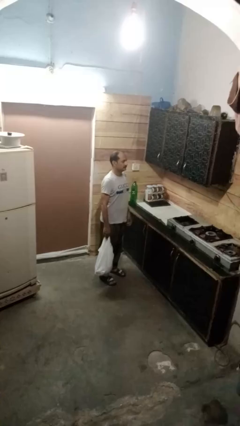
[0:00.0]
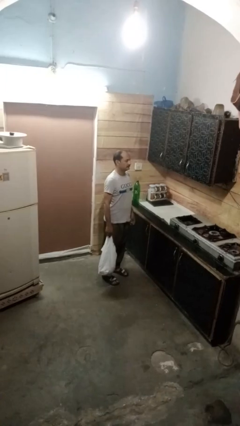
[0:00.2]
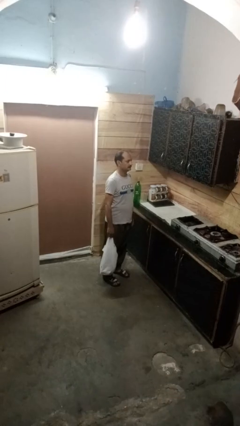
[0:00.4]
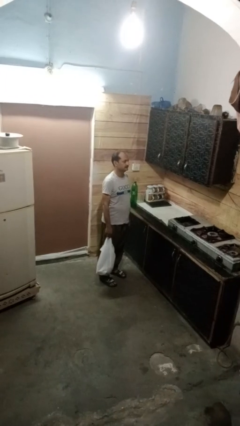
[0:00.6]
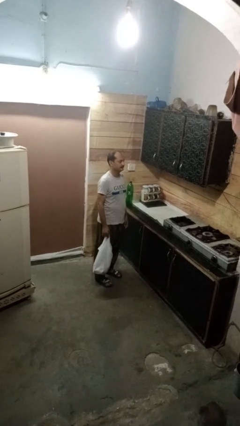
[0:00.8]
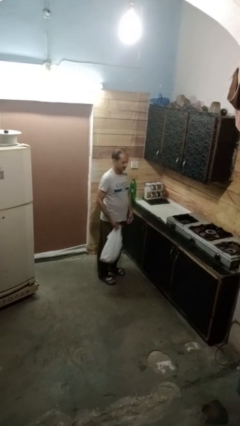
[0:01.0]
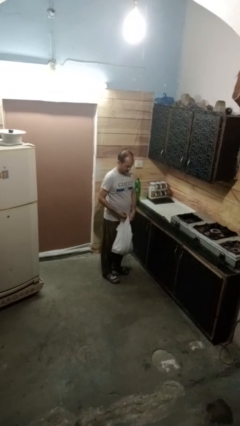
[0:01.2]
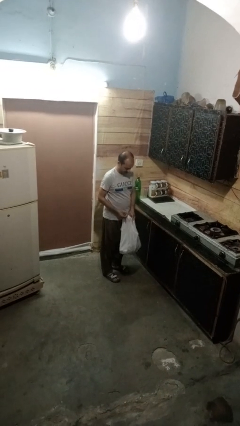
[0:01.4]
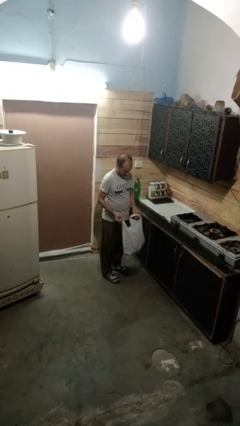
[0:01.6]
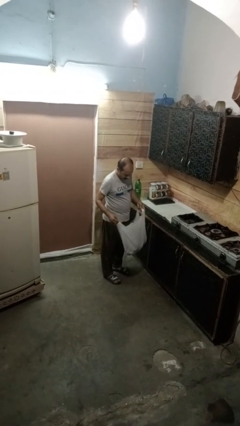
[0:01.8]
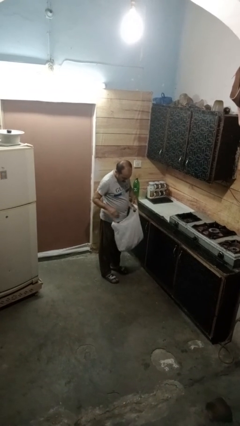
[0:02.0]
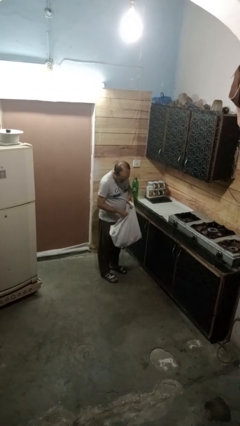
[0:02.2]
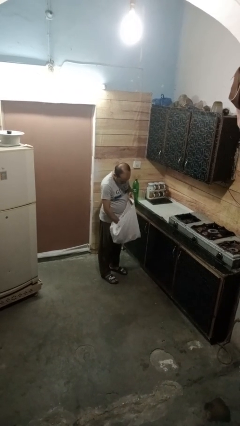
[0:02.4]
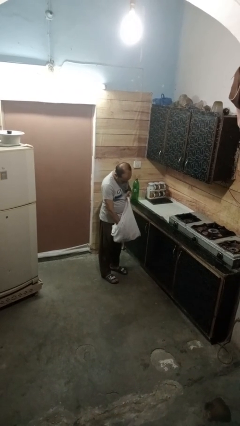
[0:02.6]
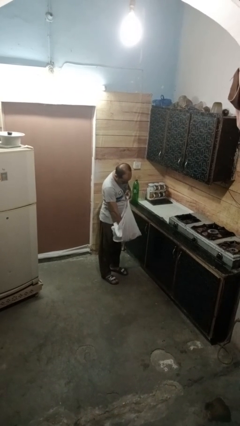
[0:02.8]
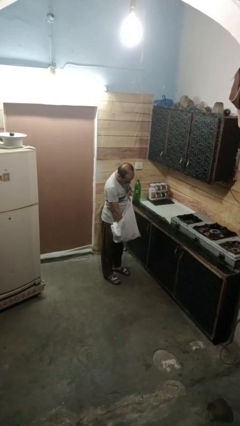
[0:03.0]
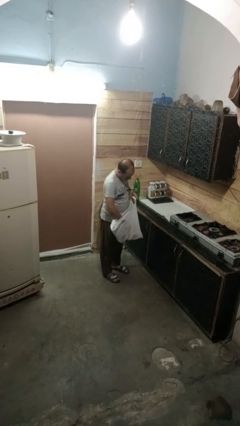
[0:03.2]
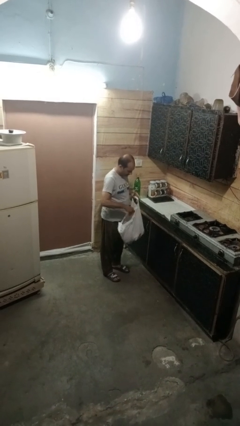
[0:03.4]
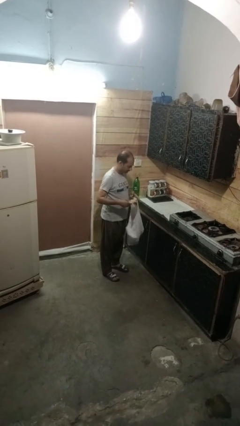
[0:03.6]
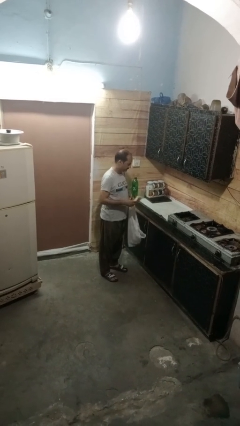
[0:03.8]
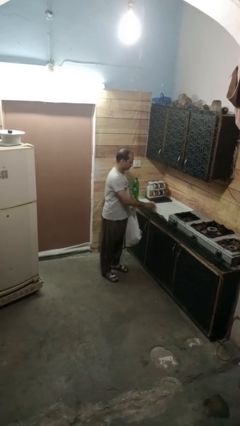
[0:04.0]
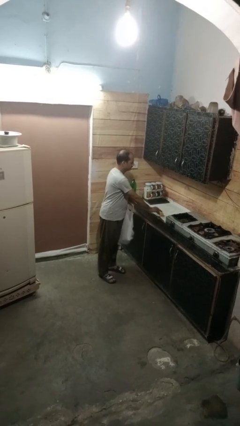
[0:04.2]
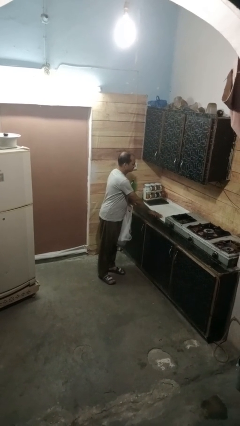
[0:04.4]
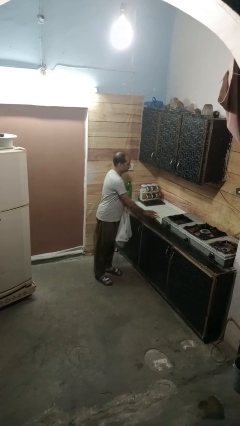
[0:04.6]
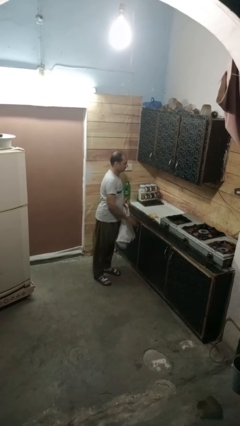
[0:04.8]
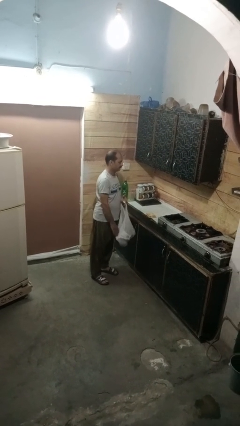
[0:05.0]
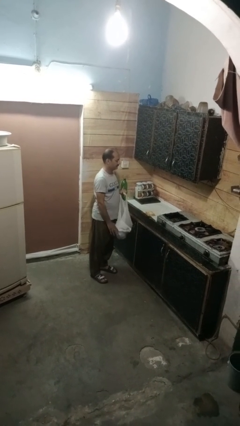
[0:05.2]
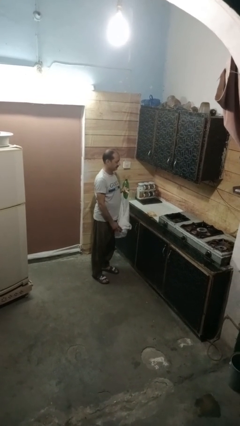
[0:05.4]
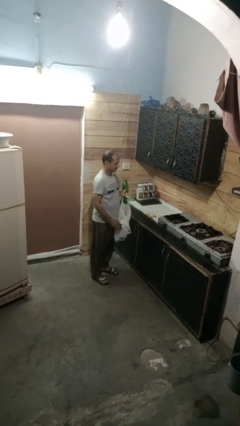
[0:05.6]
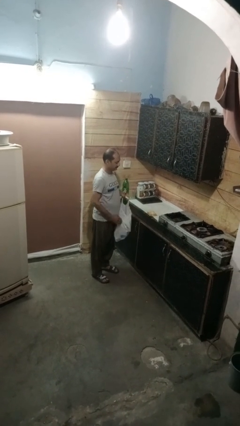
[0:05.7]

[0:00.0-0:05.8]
person takes object from bag

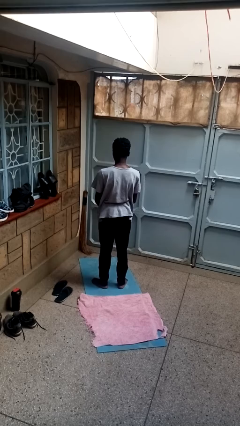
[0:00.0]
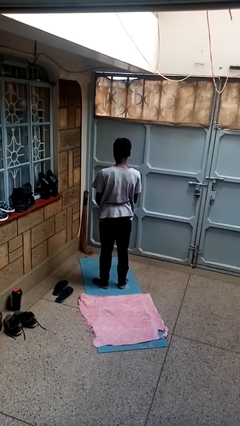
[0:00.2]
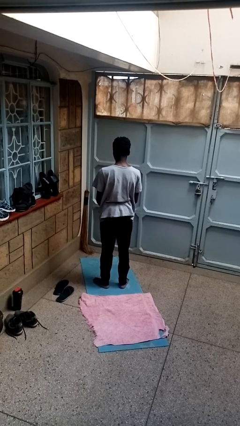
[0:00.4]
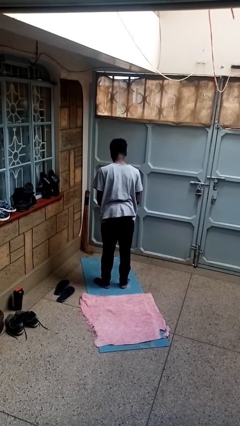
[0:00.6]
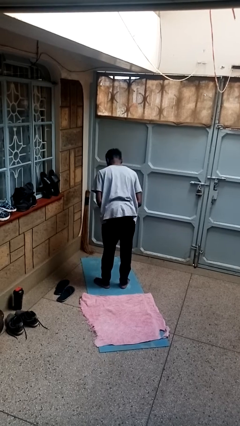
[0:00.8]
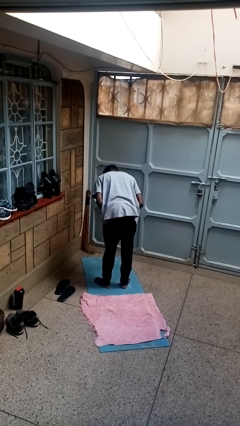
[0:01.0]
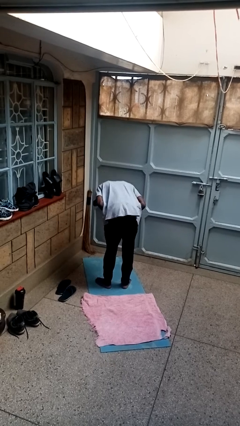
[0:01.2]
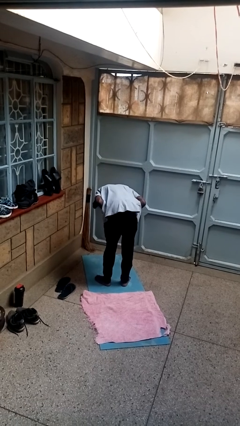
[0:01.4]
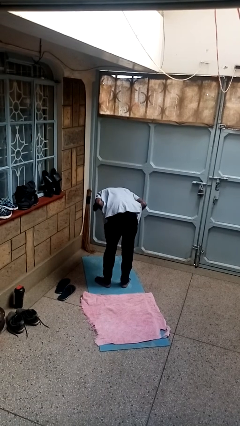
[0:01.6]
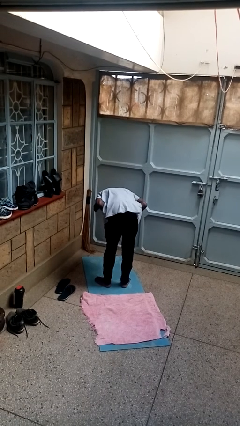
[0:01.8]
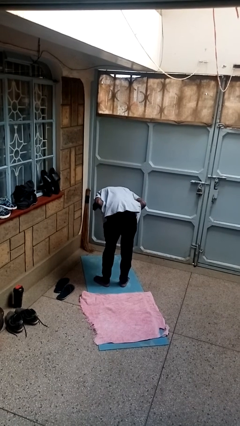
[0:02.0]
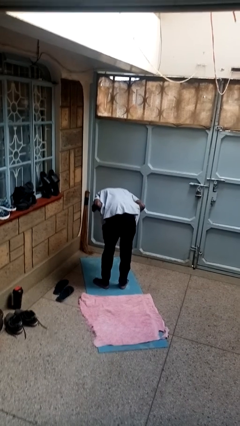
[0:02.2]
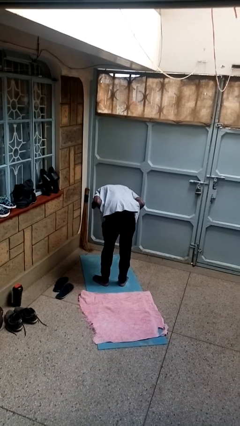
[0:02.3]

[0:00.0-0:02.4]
person bows

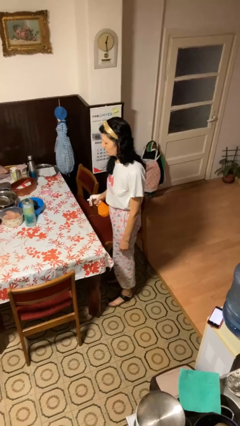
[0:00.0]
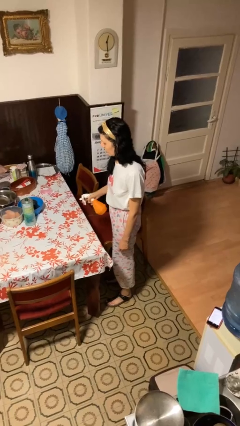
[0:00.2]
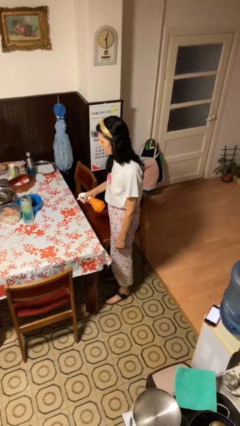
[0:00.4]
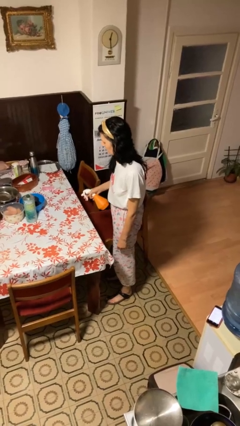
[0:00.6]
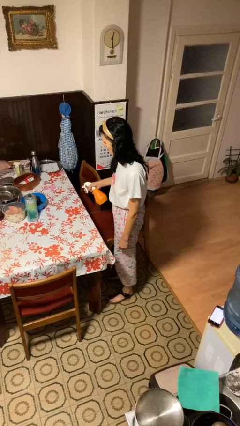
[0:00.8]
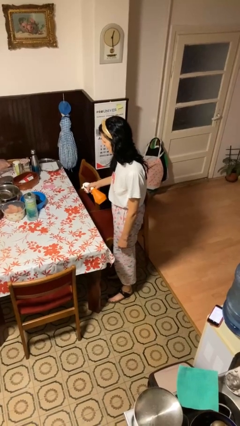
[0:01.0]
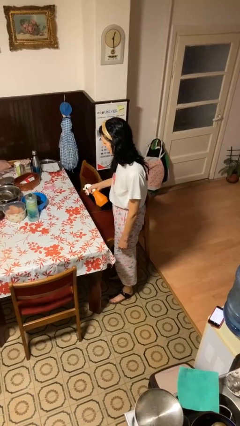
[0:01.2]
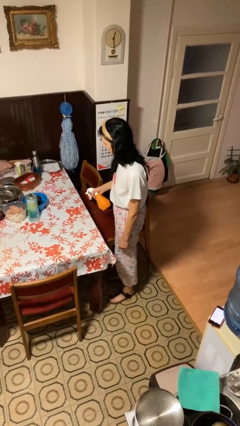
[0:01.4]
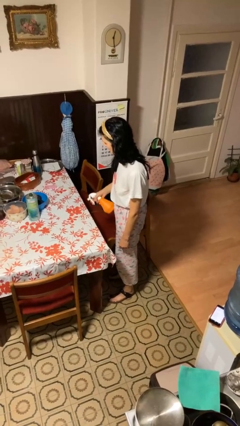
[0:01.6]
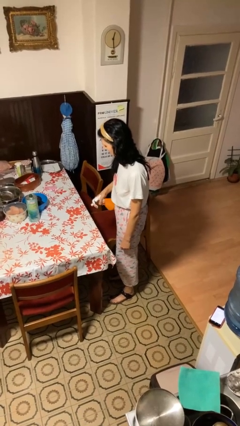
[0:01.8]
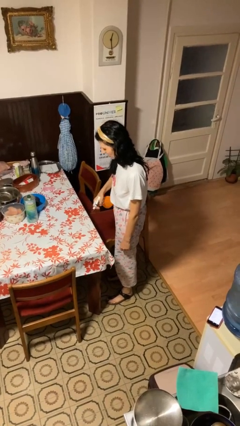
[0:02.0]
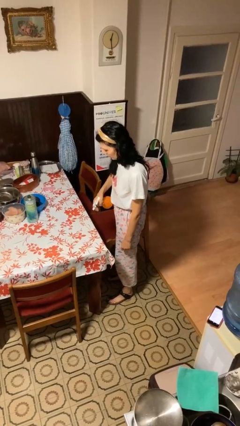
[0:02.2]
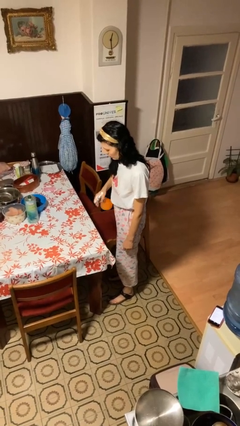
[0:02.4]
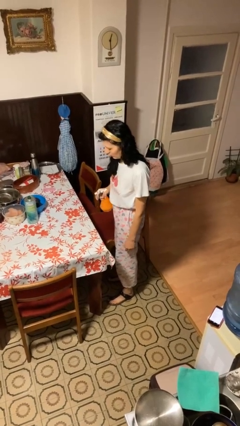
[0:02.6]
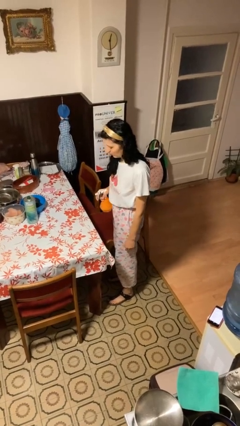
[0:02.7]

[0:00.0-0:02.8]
person sprays from bottle

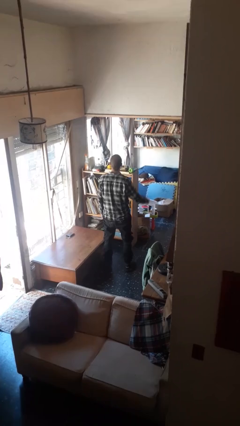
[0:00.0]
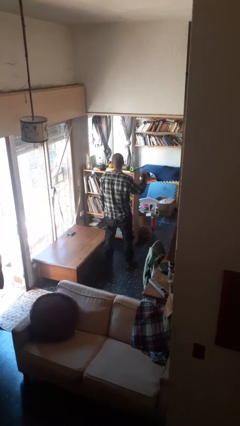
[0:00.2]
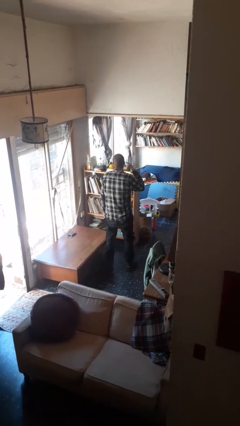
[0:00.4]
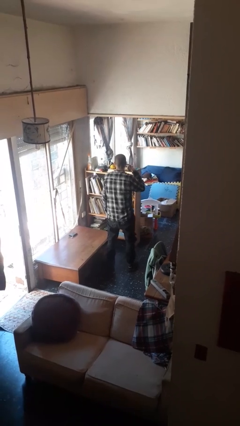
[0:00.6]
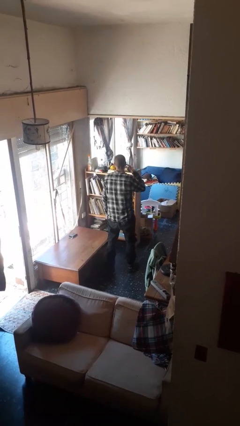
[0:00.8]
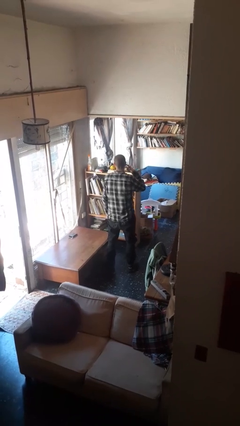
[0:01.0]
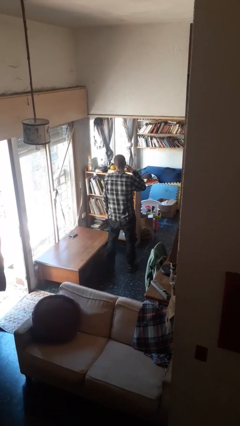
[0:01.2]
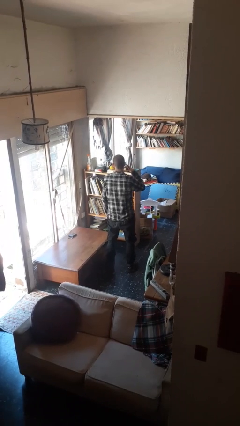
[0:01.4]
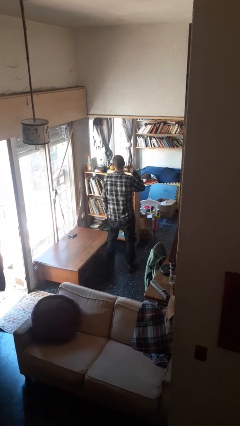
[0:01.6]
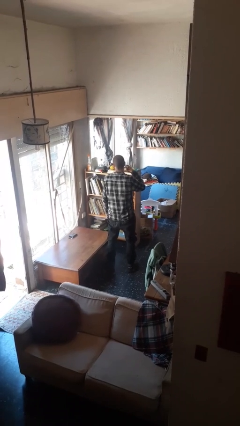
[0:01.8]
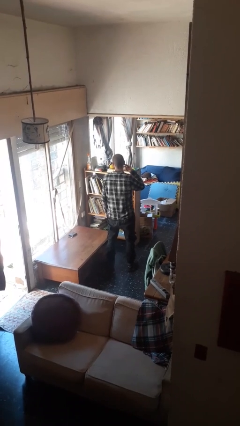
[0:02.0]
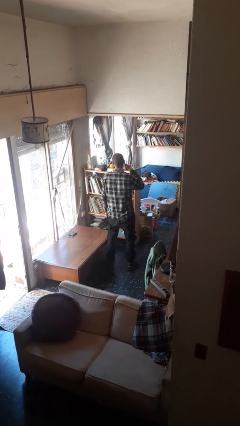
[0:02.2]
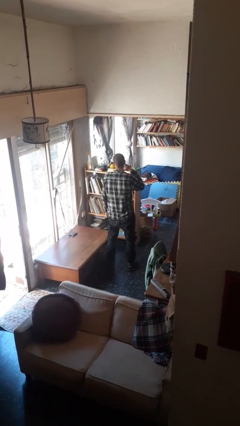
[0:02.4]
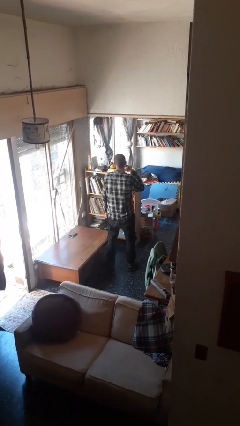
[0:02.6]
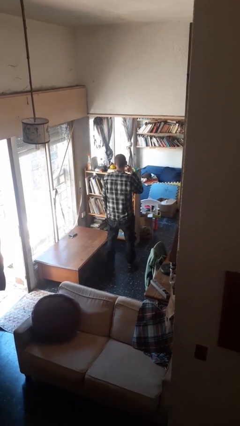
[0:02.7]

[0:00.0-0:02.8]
person gestures listen closely

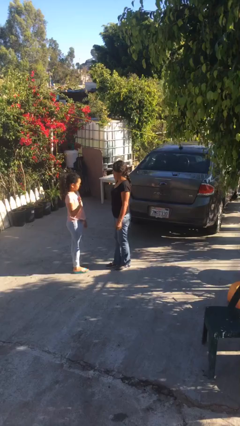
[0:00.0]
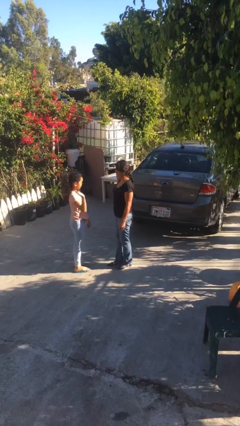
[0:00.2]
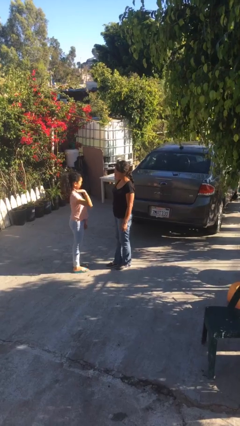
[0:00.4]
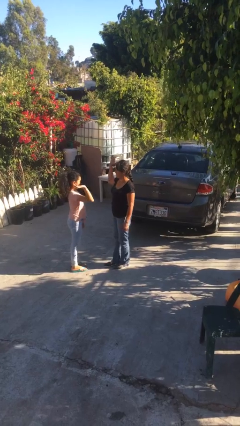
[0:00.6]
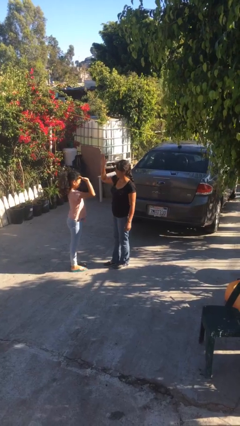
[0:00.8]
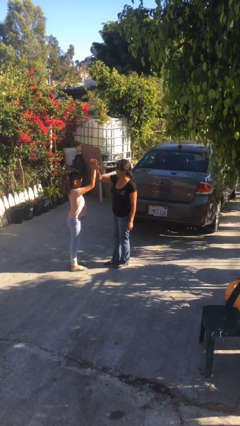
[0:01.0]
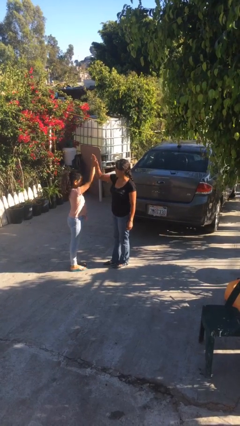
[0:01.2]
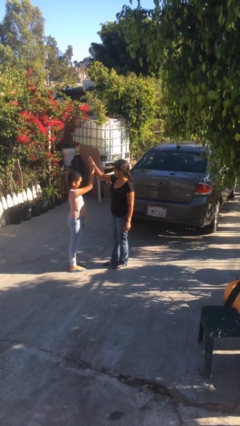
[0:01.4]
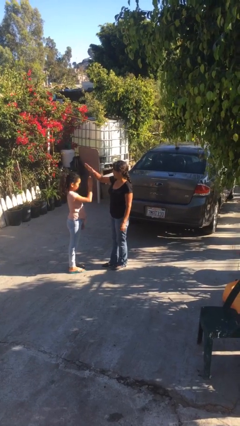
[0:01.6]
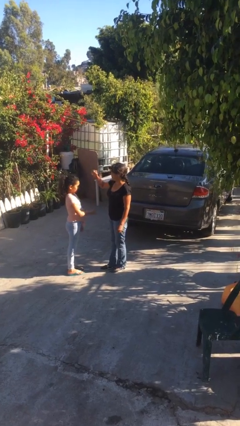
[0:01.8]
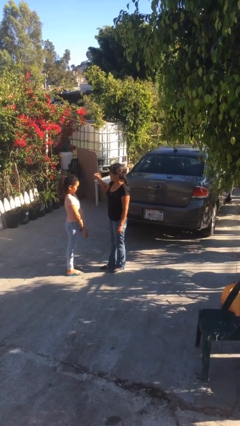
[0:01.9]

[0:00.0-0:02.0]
person highfives hand

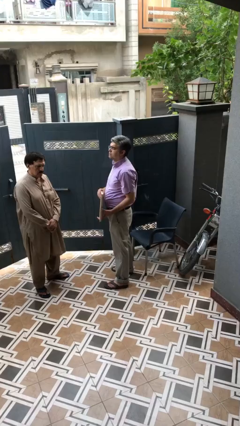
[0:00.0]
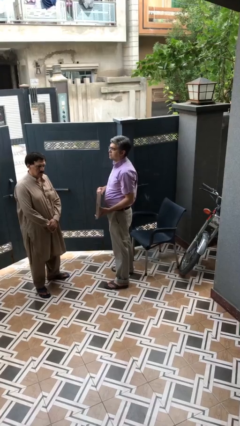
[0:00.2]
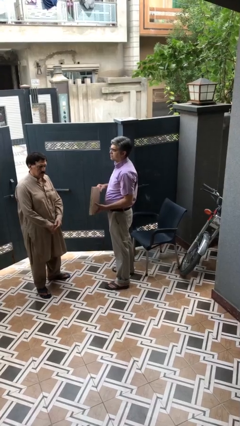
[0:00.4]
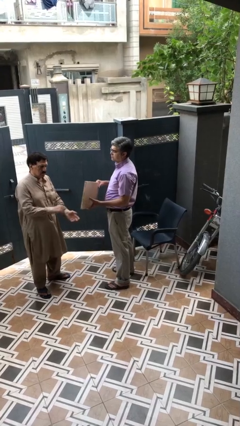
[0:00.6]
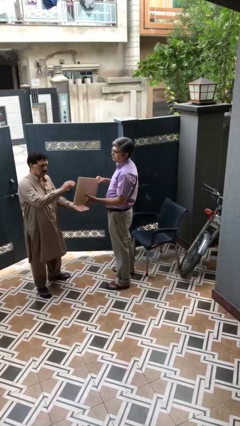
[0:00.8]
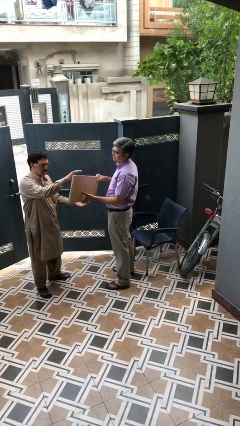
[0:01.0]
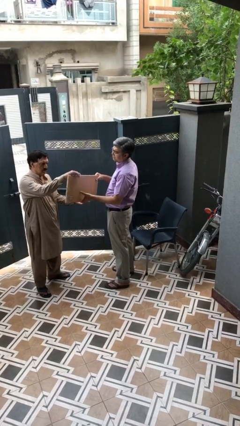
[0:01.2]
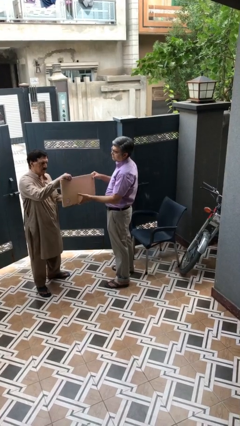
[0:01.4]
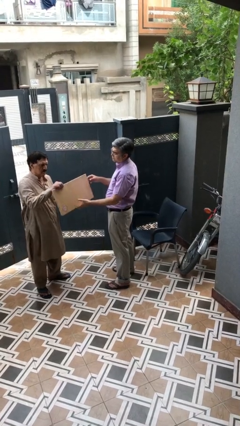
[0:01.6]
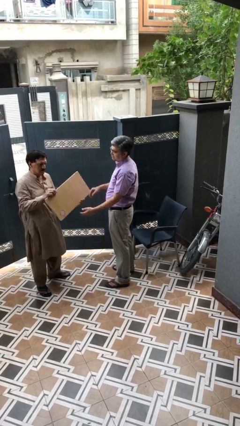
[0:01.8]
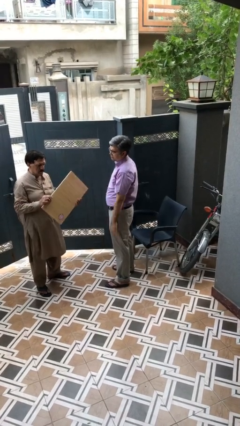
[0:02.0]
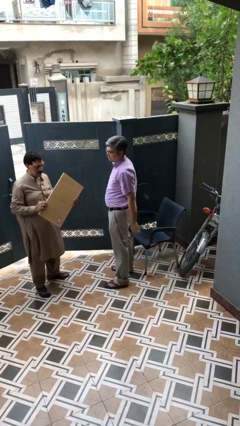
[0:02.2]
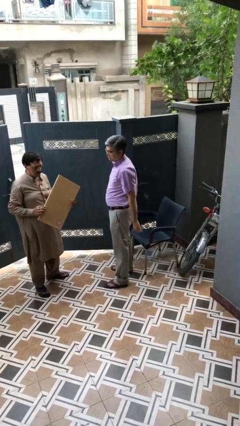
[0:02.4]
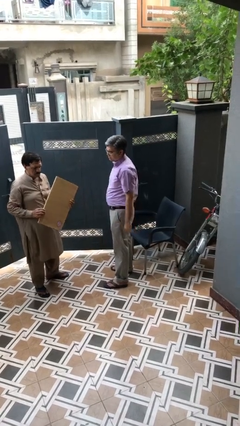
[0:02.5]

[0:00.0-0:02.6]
person transfers object to person
